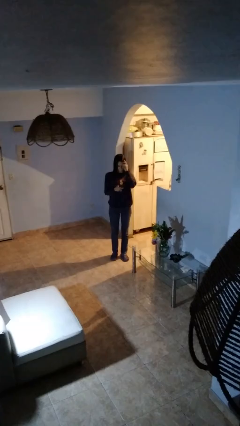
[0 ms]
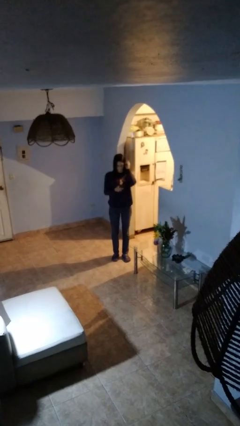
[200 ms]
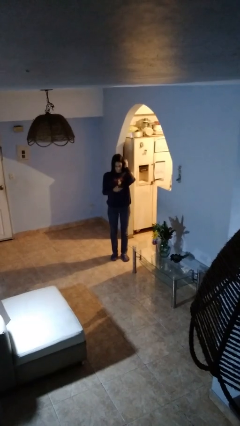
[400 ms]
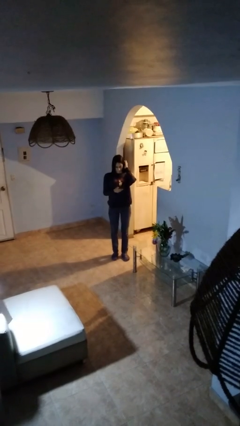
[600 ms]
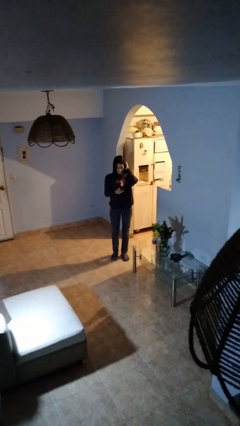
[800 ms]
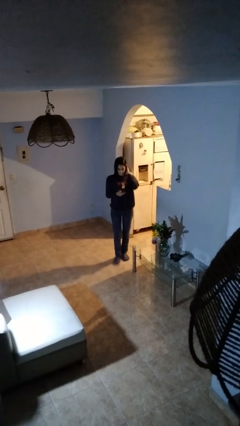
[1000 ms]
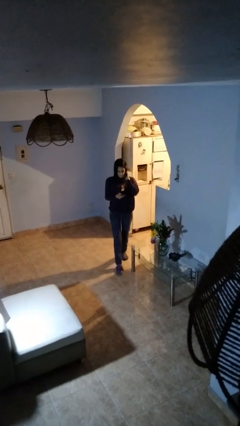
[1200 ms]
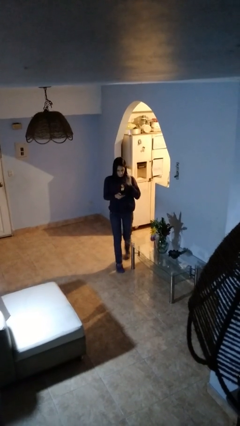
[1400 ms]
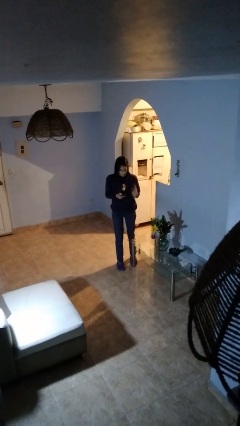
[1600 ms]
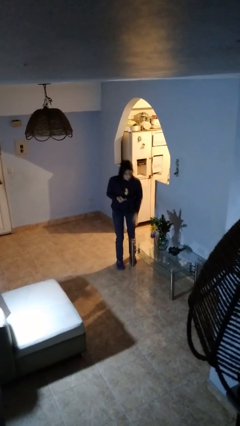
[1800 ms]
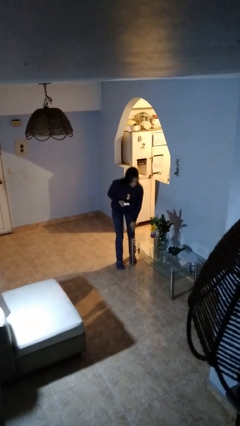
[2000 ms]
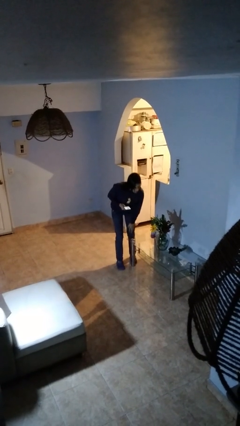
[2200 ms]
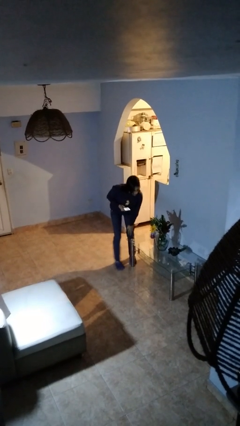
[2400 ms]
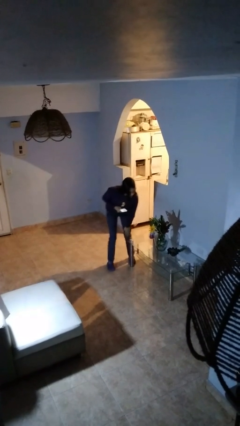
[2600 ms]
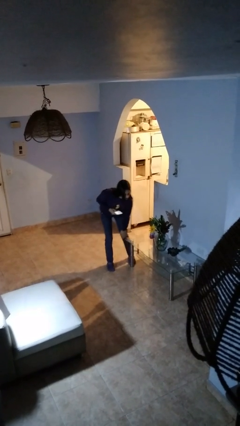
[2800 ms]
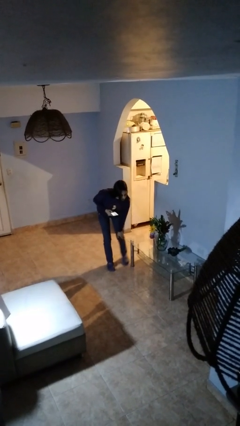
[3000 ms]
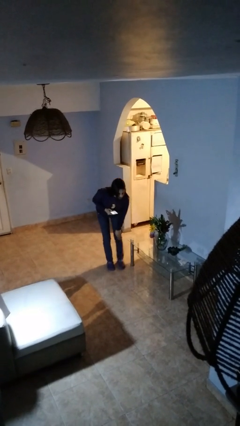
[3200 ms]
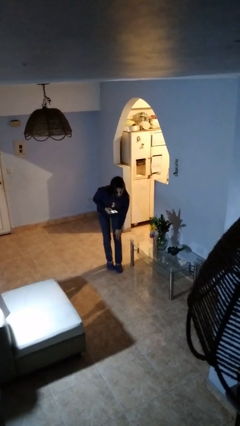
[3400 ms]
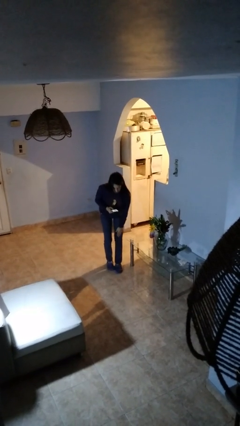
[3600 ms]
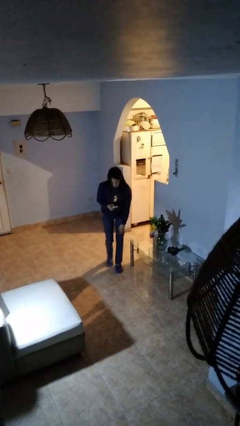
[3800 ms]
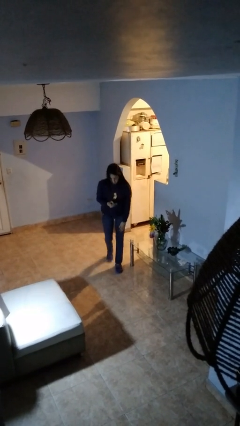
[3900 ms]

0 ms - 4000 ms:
person bumps into table

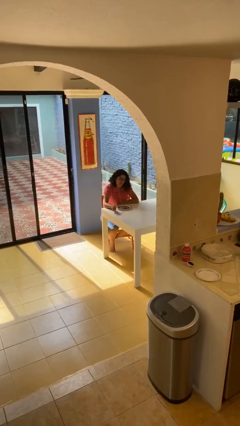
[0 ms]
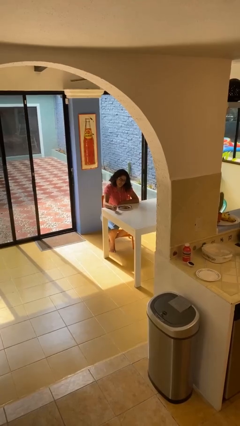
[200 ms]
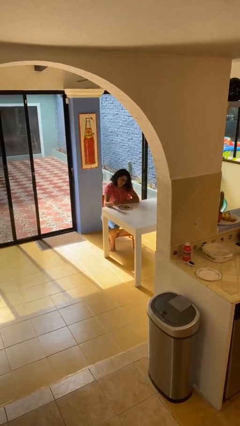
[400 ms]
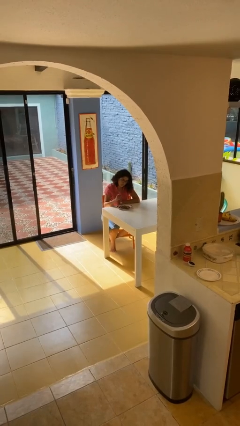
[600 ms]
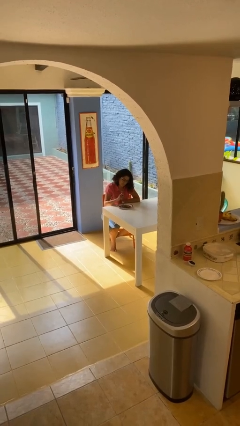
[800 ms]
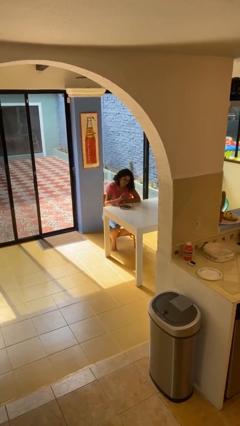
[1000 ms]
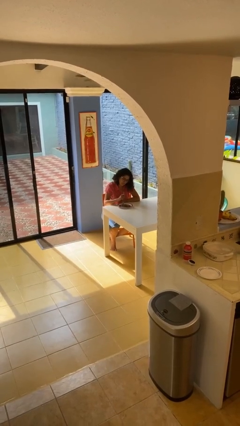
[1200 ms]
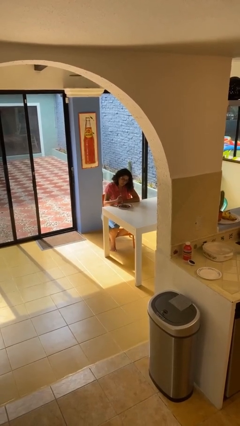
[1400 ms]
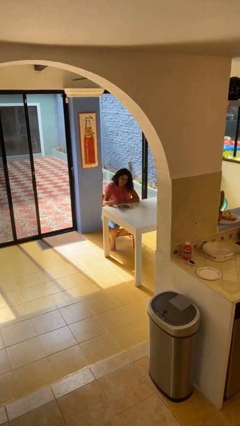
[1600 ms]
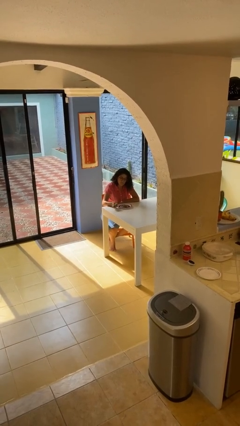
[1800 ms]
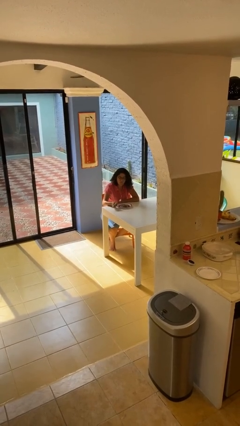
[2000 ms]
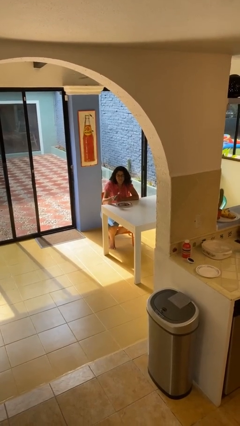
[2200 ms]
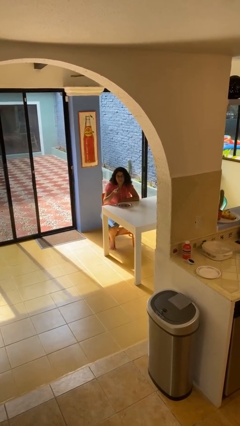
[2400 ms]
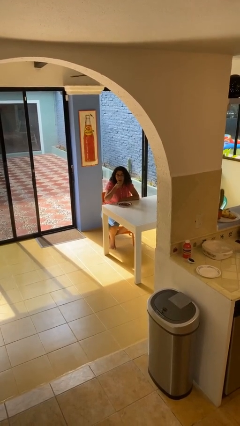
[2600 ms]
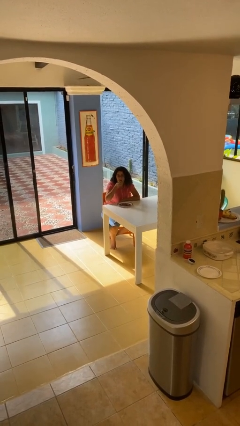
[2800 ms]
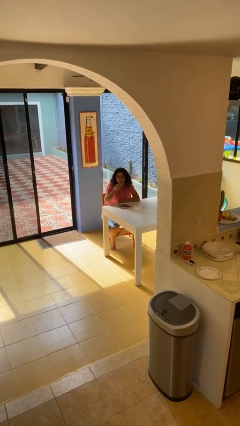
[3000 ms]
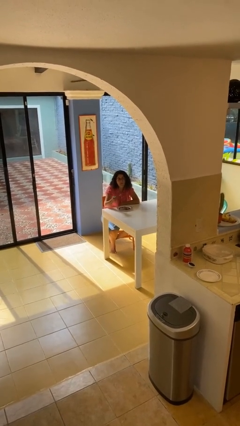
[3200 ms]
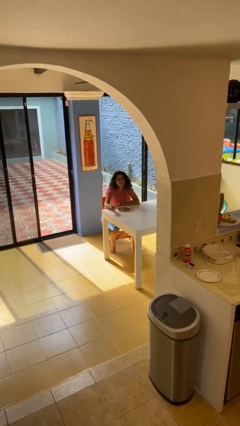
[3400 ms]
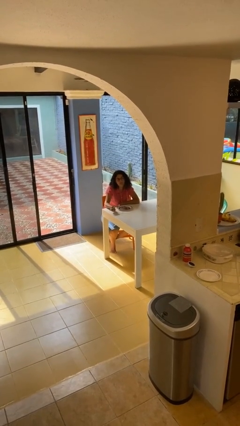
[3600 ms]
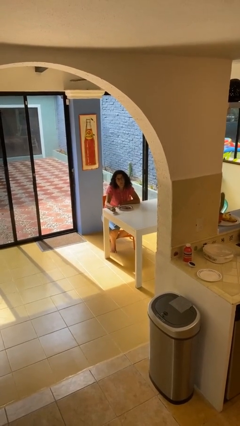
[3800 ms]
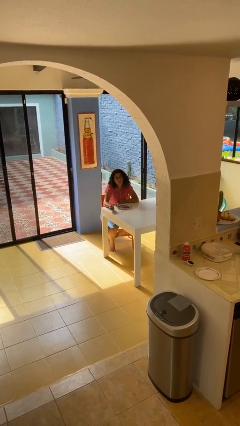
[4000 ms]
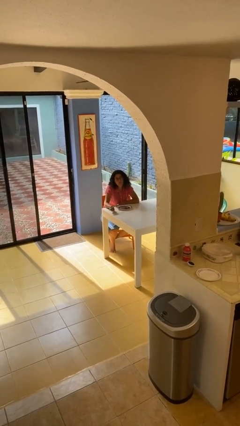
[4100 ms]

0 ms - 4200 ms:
person eats with utensil

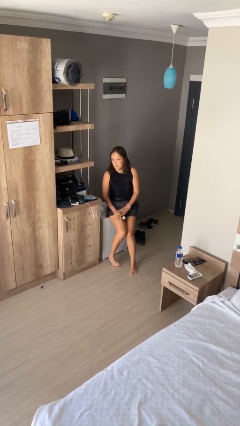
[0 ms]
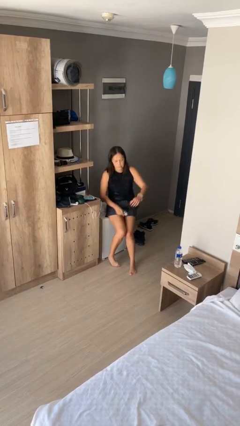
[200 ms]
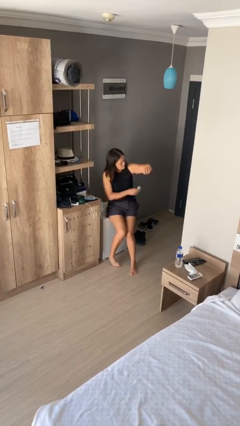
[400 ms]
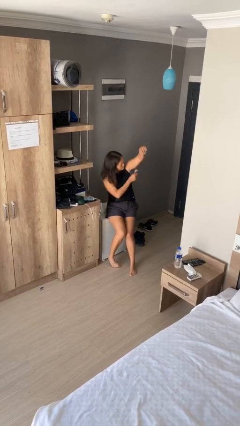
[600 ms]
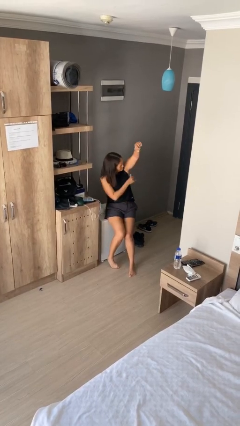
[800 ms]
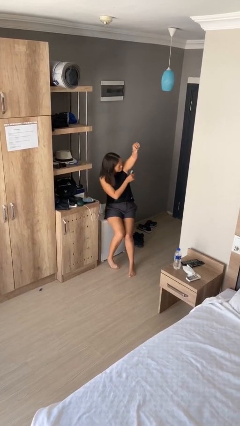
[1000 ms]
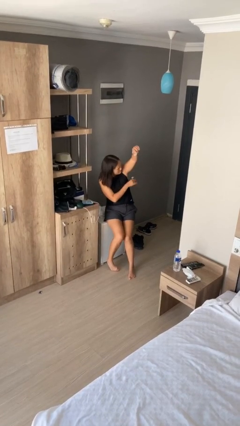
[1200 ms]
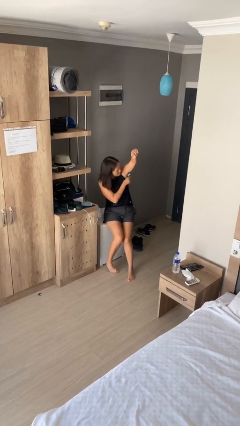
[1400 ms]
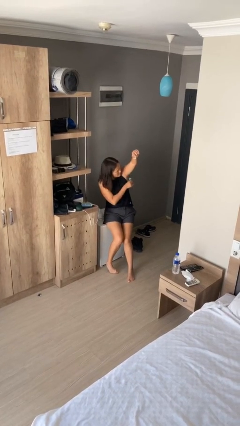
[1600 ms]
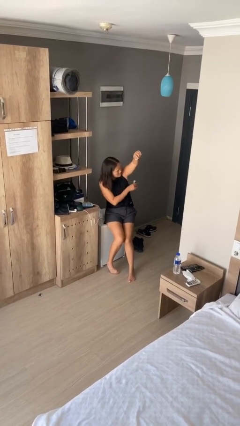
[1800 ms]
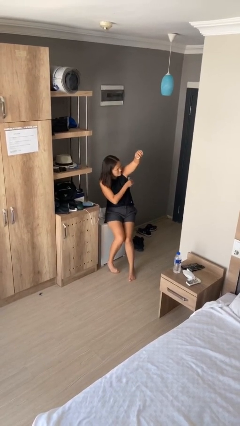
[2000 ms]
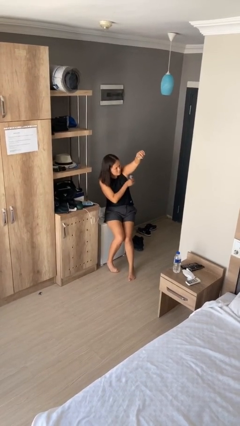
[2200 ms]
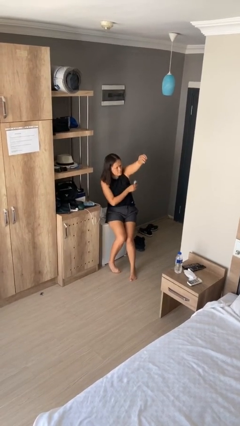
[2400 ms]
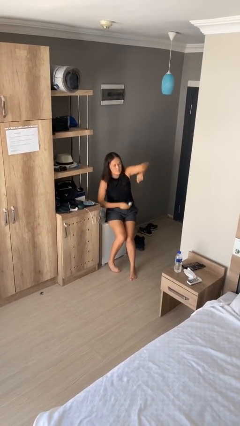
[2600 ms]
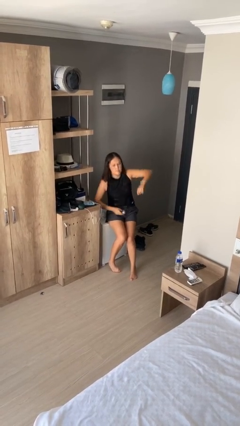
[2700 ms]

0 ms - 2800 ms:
person applies deodorant

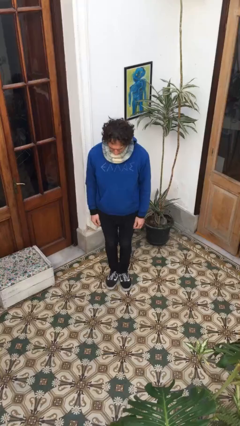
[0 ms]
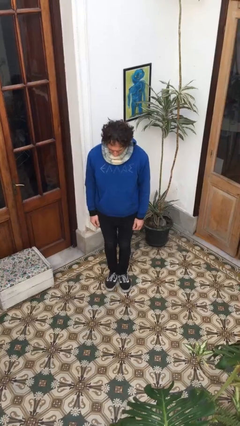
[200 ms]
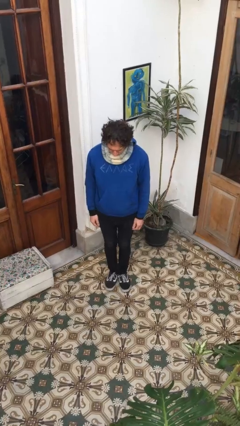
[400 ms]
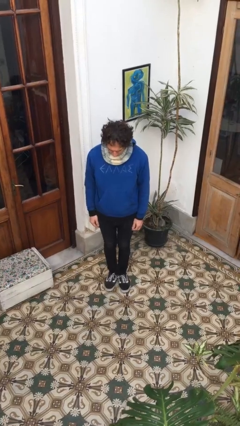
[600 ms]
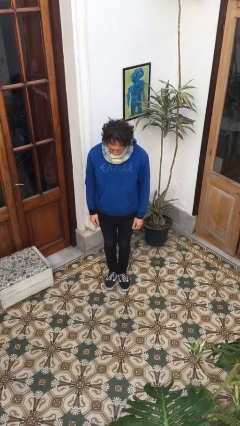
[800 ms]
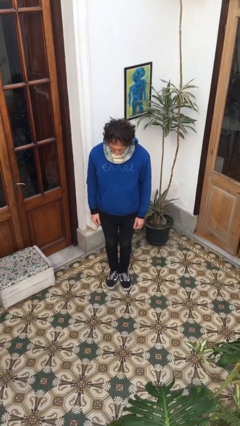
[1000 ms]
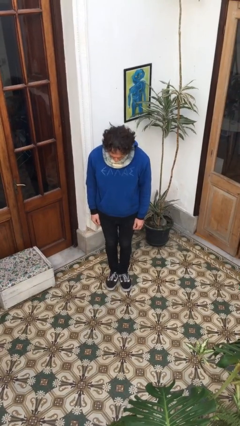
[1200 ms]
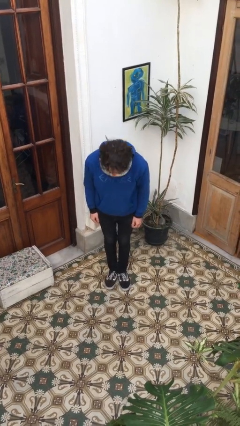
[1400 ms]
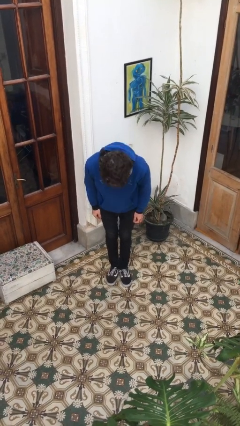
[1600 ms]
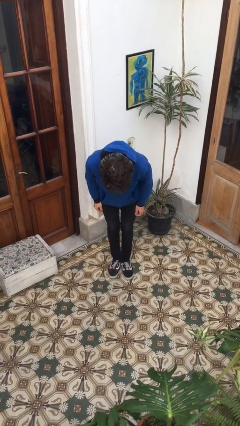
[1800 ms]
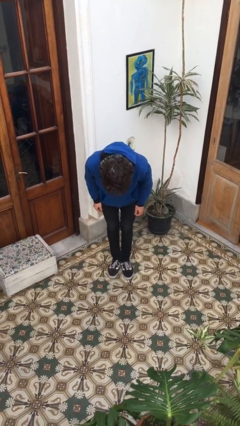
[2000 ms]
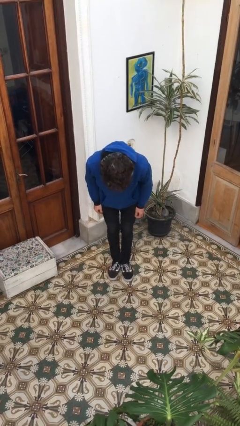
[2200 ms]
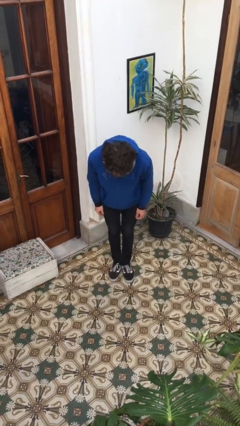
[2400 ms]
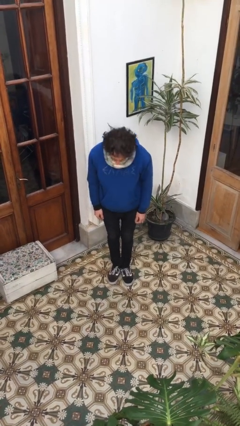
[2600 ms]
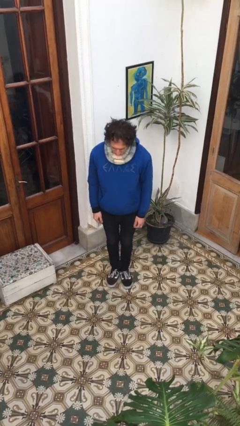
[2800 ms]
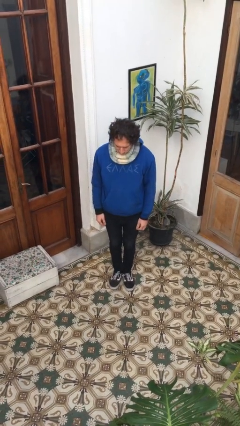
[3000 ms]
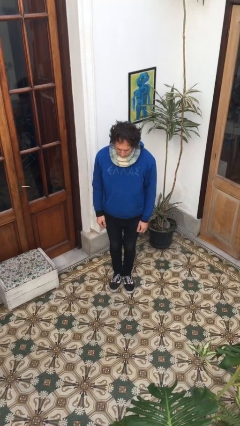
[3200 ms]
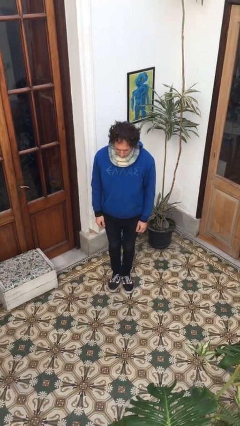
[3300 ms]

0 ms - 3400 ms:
person bows

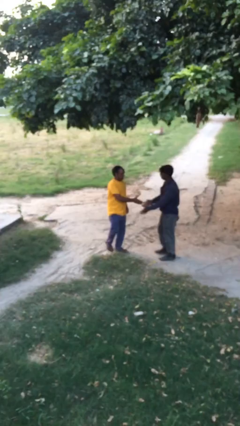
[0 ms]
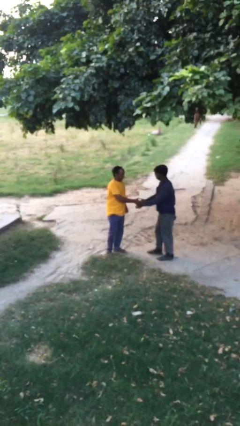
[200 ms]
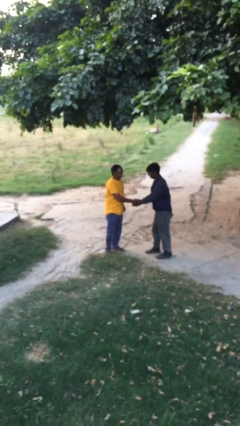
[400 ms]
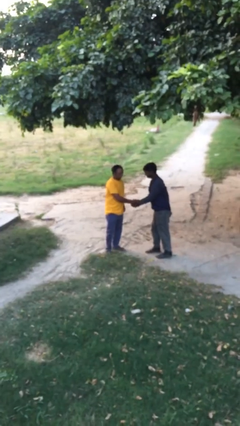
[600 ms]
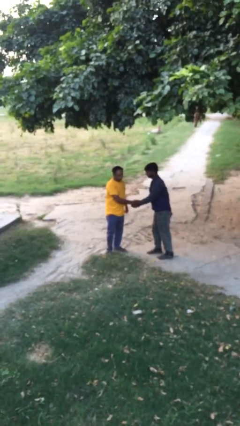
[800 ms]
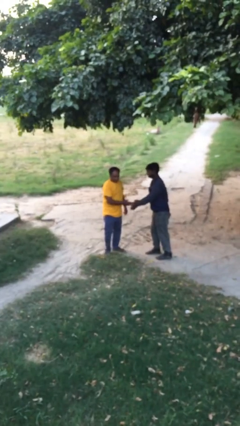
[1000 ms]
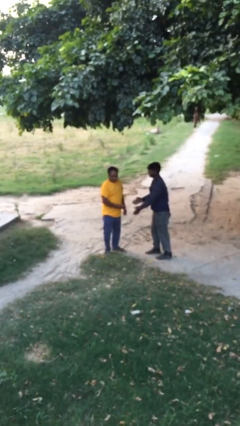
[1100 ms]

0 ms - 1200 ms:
person shakes hand

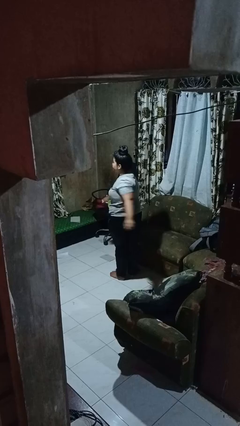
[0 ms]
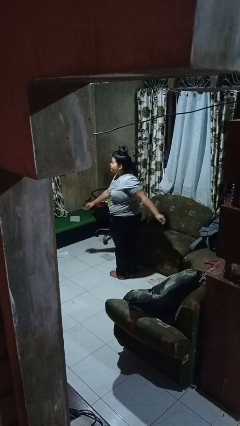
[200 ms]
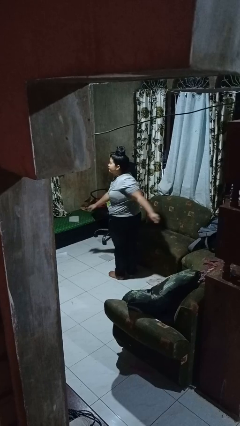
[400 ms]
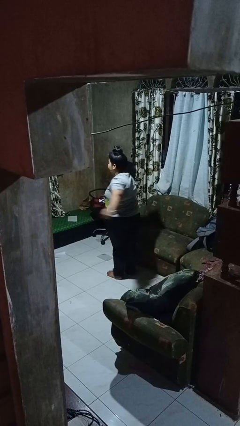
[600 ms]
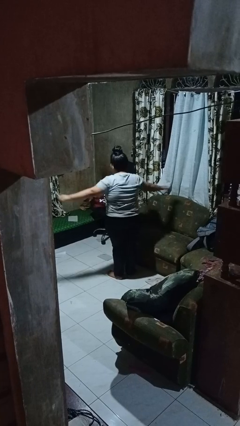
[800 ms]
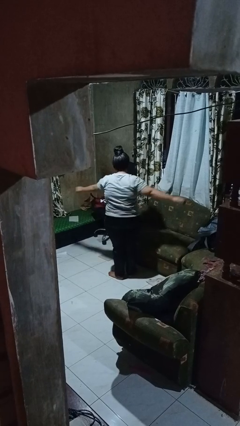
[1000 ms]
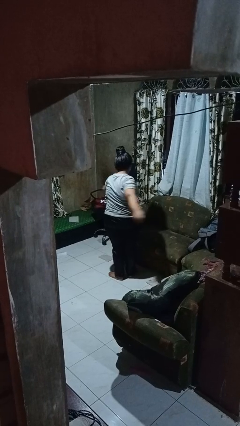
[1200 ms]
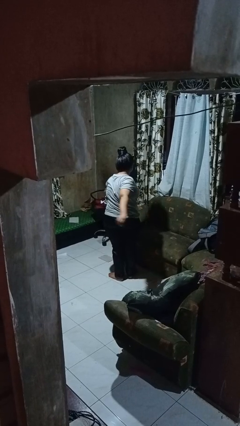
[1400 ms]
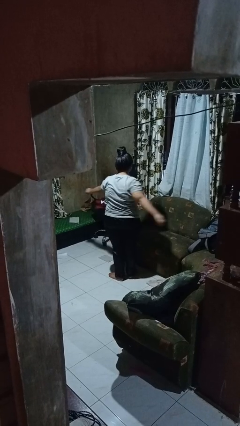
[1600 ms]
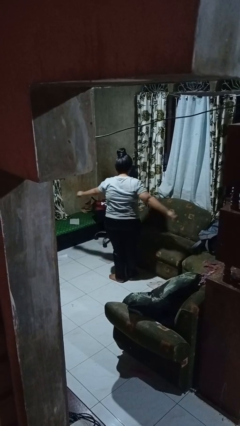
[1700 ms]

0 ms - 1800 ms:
person stretches arms to side
